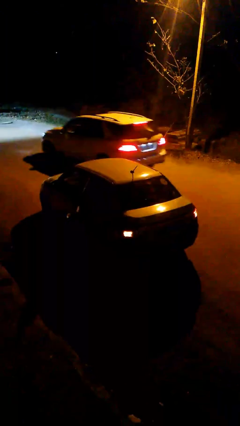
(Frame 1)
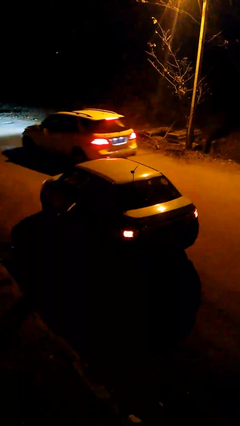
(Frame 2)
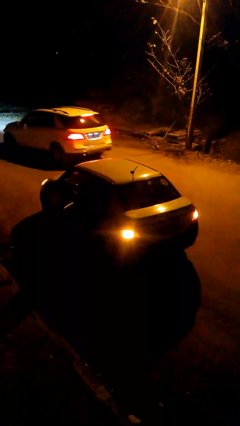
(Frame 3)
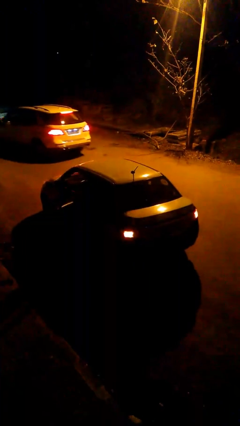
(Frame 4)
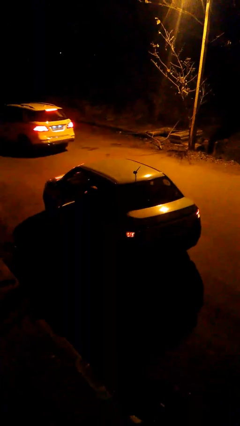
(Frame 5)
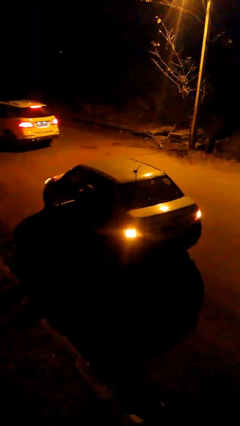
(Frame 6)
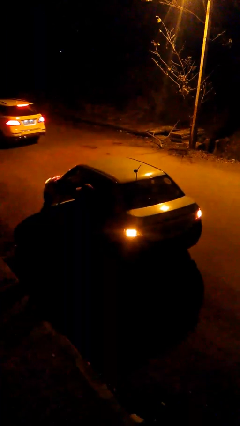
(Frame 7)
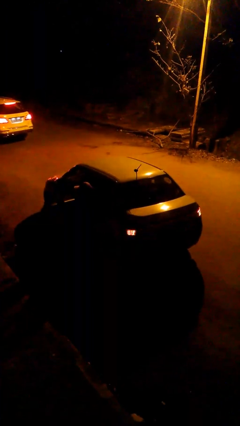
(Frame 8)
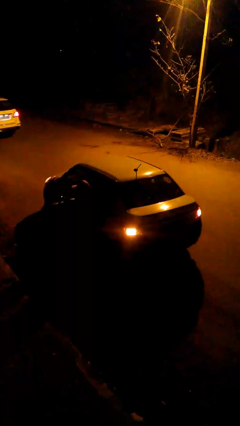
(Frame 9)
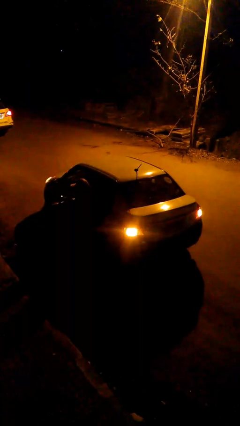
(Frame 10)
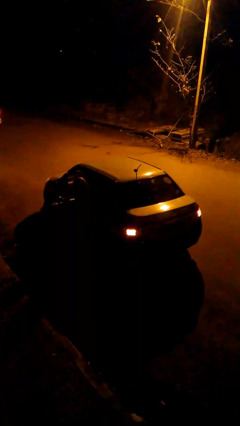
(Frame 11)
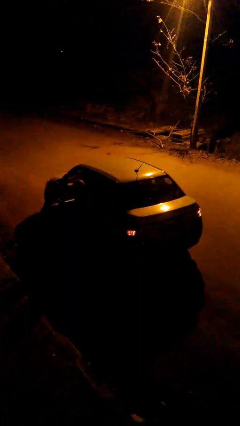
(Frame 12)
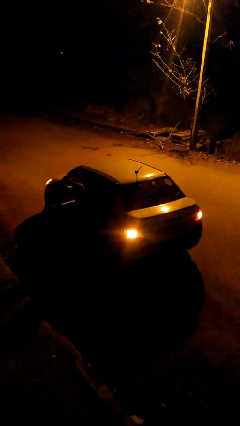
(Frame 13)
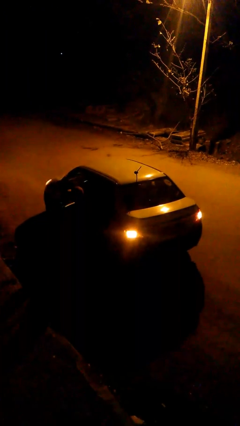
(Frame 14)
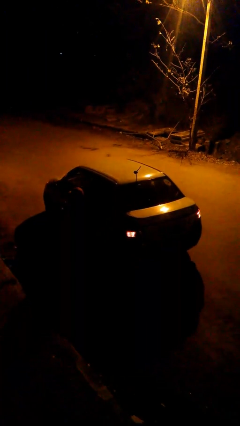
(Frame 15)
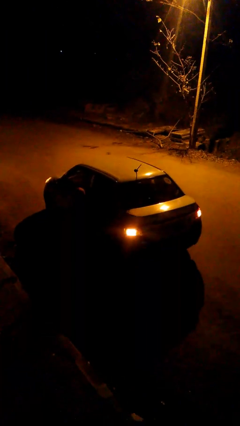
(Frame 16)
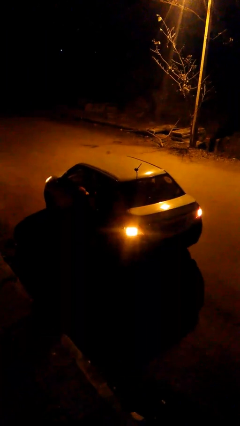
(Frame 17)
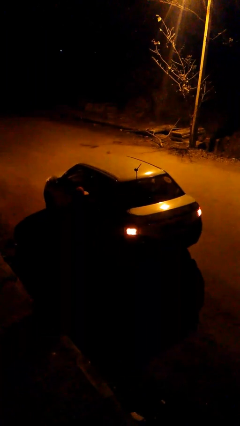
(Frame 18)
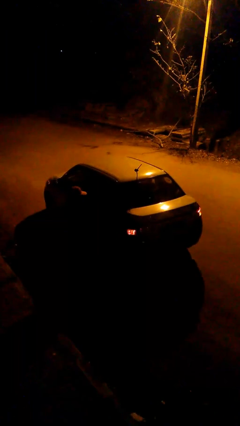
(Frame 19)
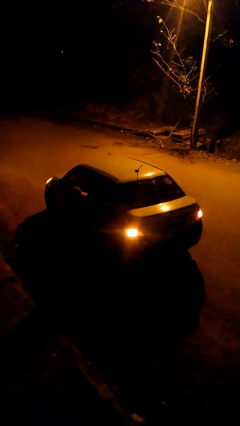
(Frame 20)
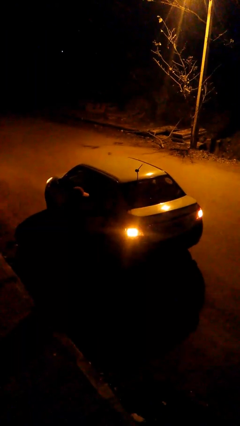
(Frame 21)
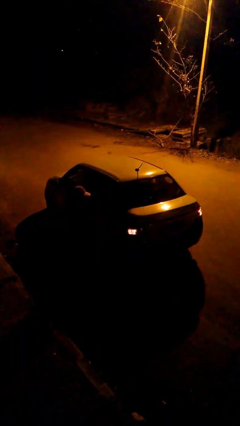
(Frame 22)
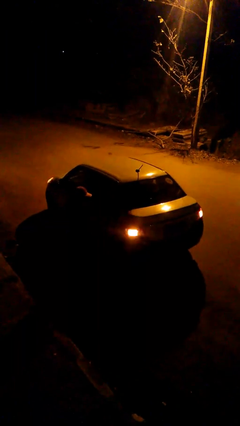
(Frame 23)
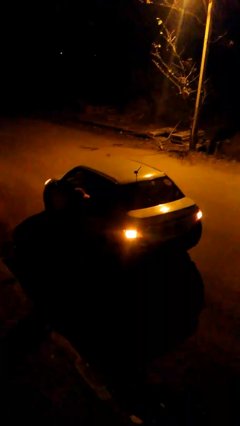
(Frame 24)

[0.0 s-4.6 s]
car drops off person

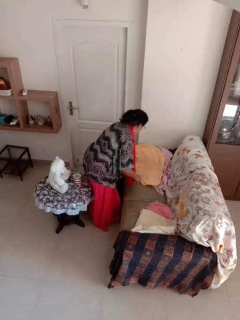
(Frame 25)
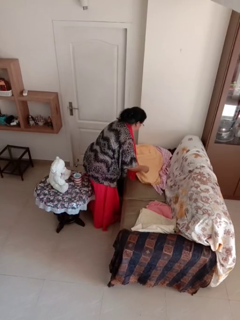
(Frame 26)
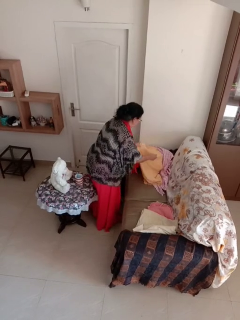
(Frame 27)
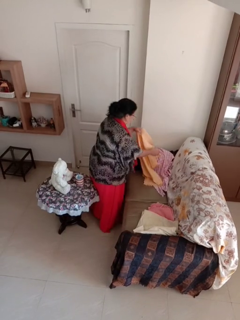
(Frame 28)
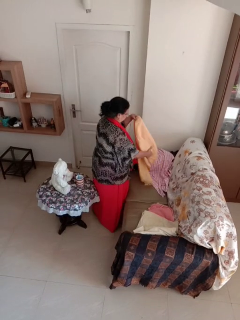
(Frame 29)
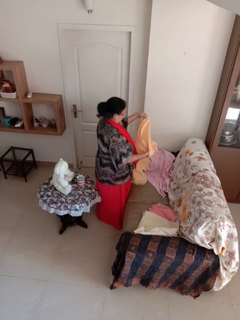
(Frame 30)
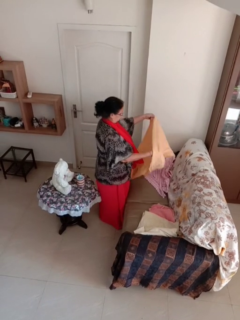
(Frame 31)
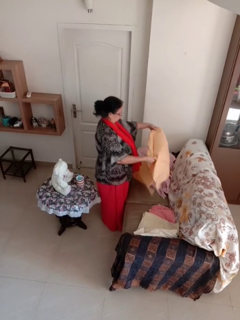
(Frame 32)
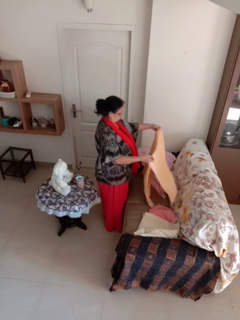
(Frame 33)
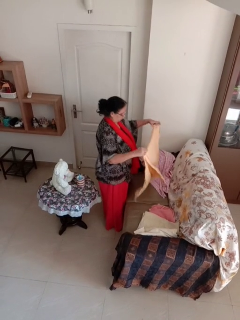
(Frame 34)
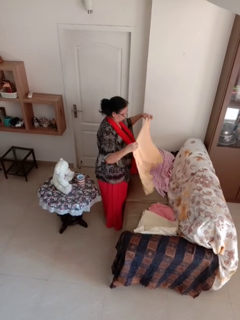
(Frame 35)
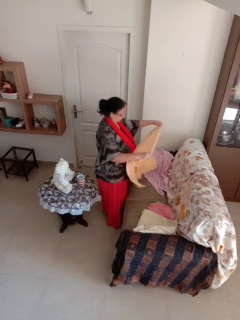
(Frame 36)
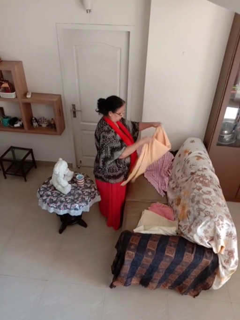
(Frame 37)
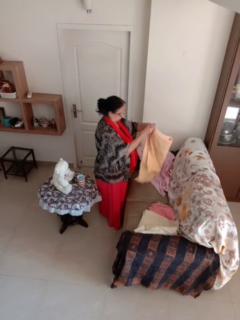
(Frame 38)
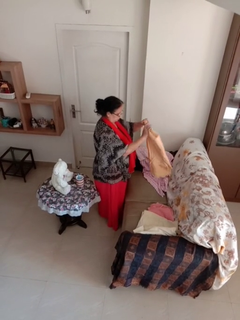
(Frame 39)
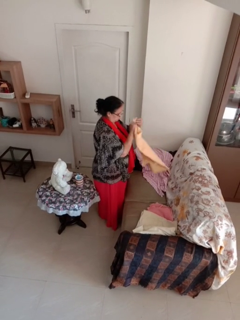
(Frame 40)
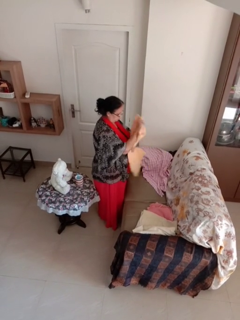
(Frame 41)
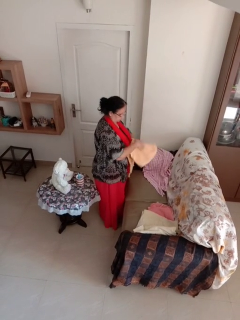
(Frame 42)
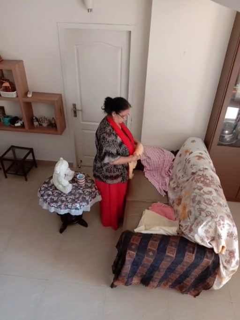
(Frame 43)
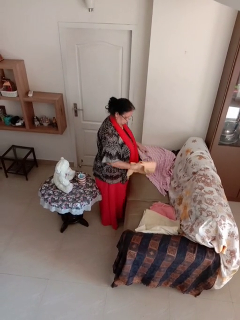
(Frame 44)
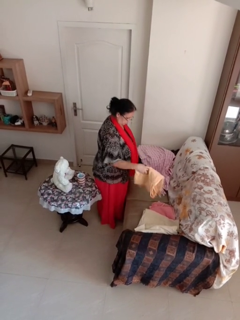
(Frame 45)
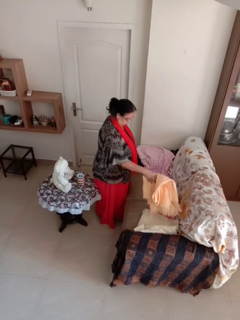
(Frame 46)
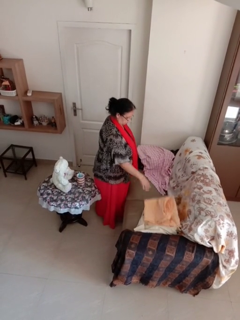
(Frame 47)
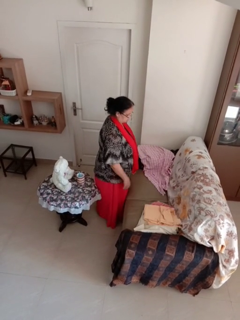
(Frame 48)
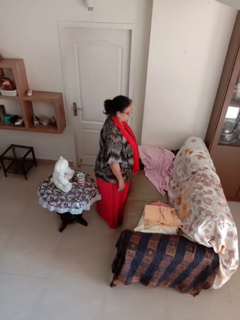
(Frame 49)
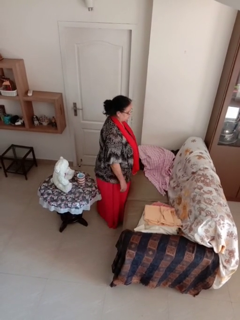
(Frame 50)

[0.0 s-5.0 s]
person folds towel

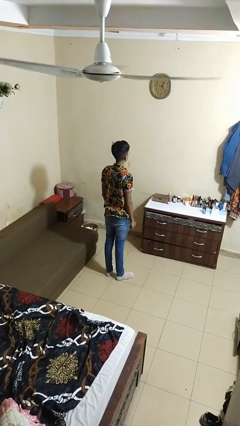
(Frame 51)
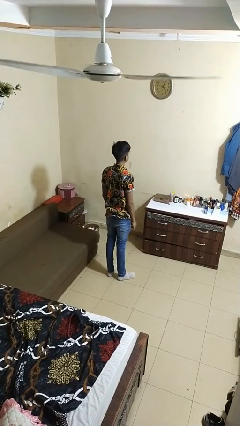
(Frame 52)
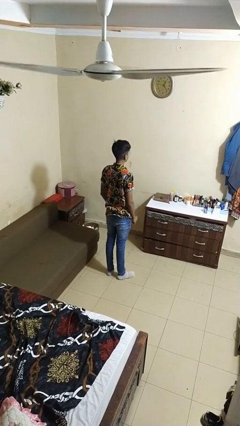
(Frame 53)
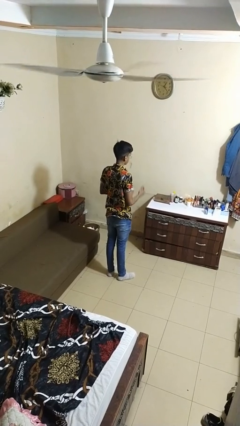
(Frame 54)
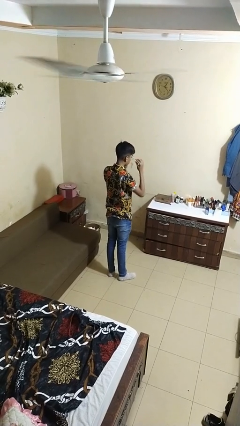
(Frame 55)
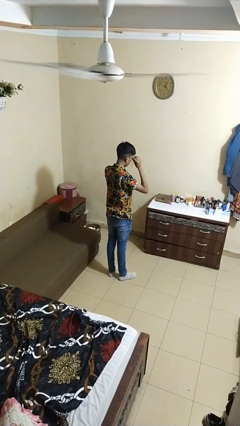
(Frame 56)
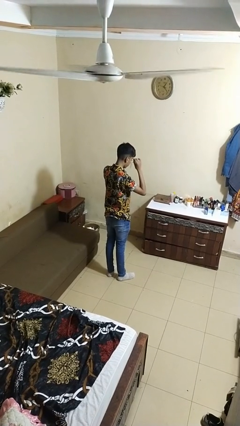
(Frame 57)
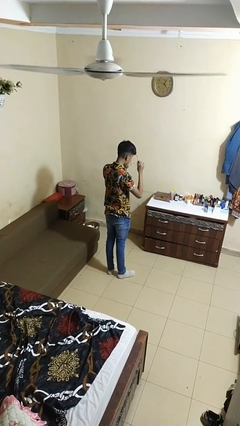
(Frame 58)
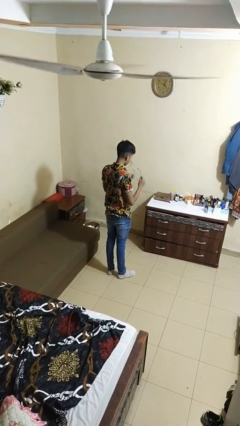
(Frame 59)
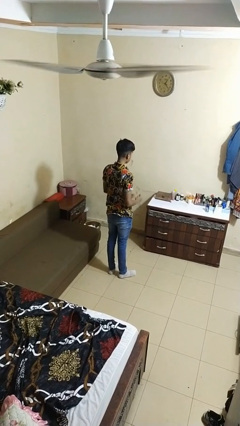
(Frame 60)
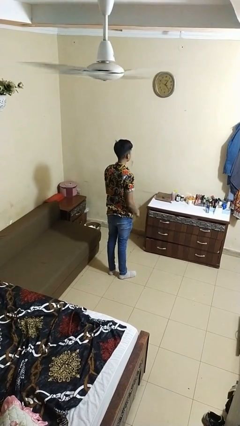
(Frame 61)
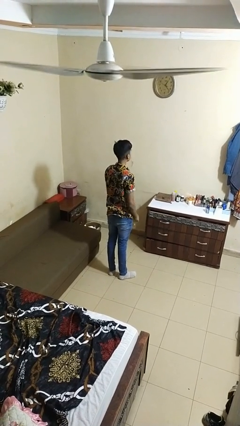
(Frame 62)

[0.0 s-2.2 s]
person takes off glasses

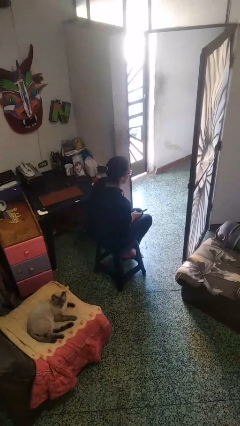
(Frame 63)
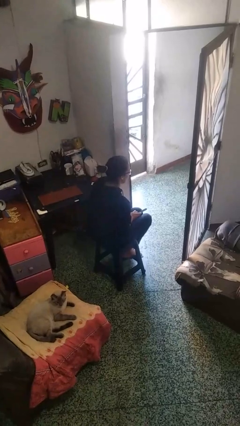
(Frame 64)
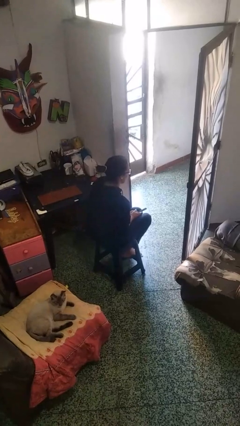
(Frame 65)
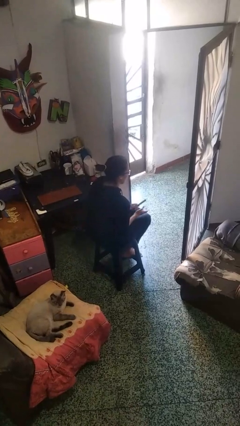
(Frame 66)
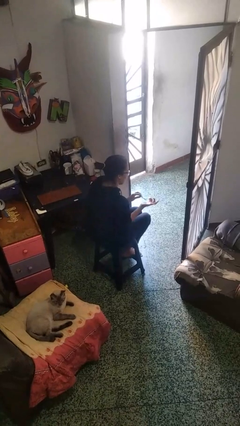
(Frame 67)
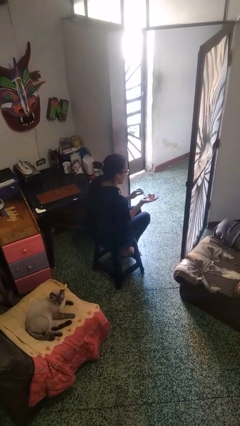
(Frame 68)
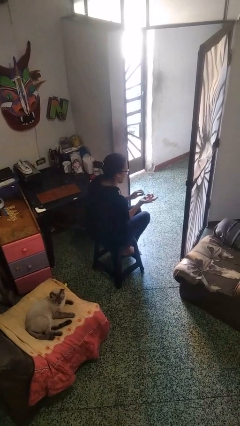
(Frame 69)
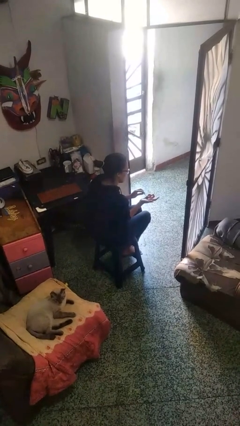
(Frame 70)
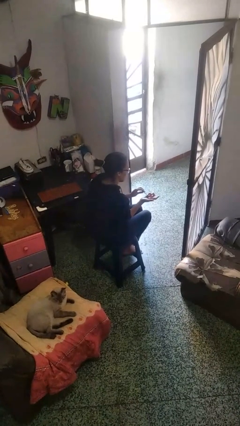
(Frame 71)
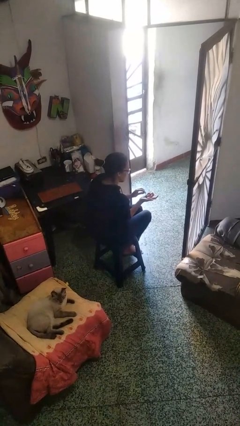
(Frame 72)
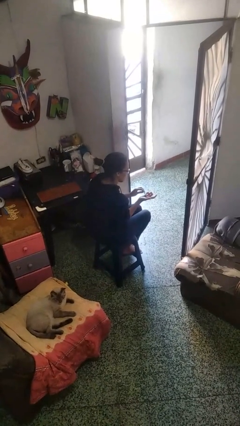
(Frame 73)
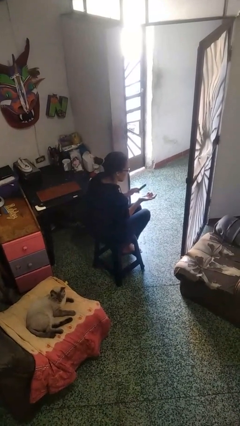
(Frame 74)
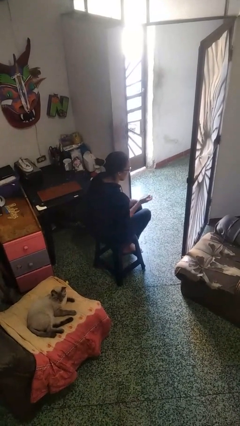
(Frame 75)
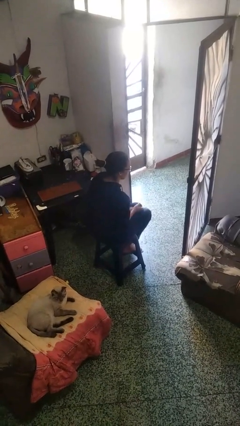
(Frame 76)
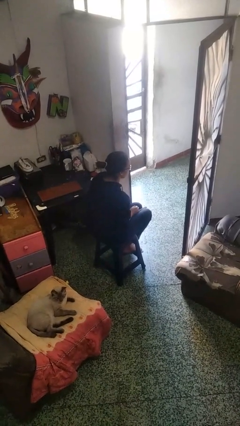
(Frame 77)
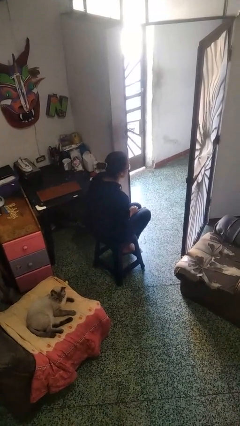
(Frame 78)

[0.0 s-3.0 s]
person files fingernails

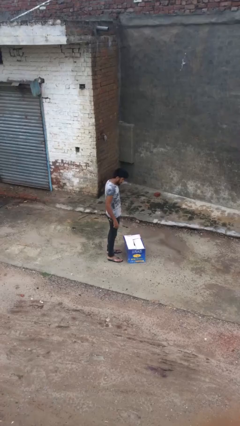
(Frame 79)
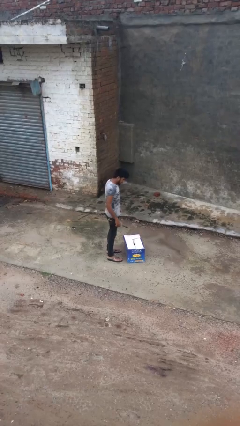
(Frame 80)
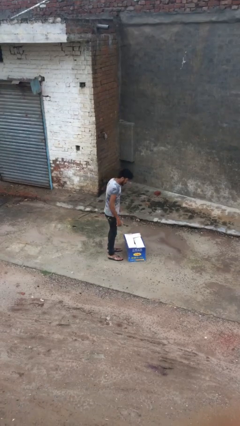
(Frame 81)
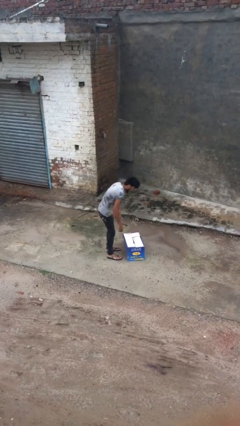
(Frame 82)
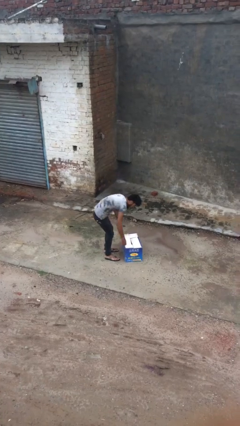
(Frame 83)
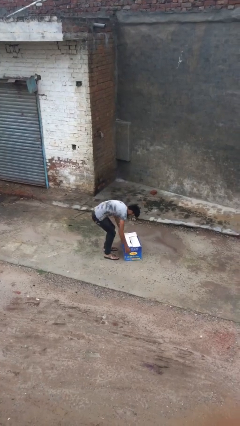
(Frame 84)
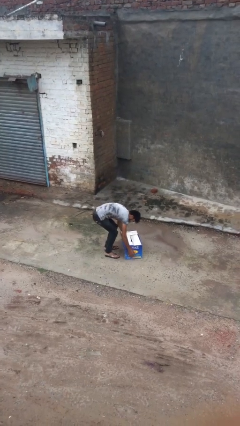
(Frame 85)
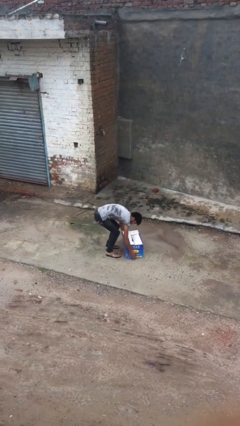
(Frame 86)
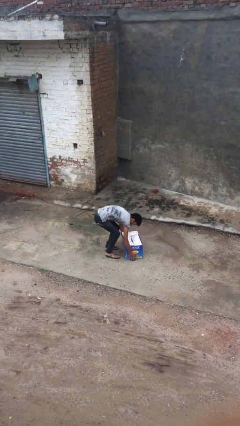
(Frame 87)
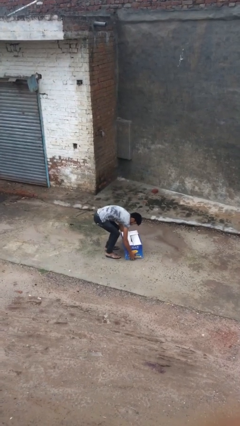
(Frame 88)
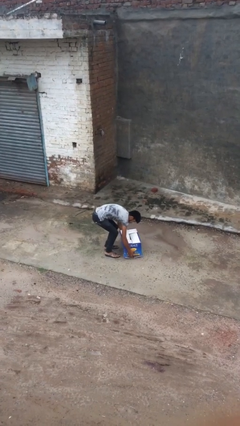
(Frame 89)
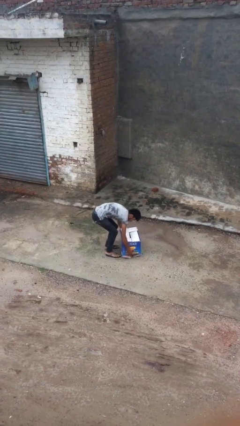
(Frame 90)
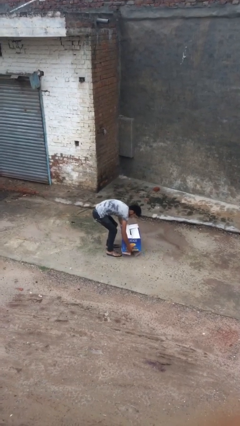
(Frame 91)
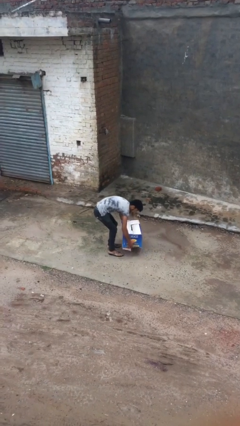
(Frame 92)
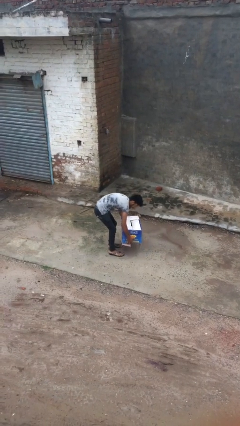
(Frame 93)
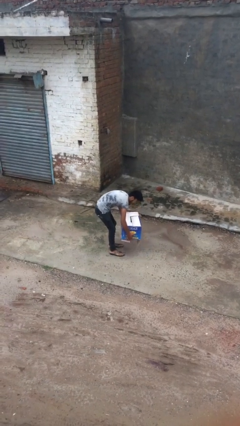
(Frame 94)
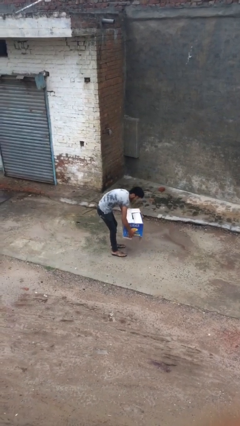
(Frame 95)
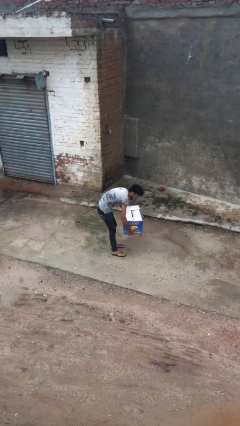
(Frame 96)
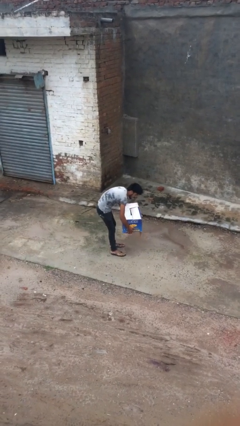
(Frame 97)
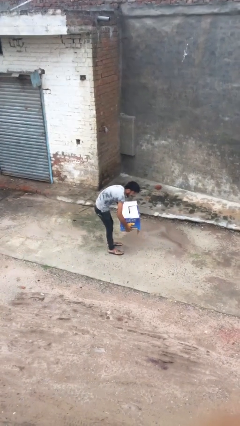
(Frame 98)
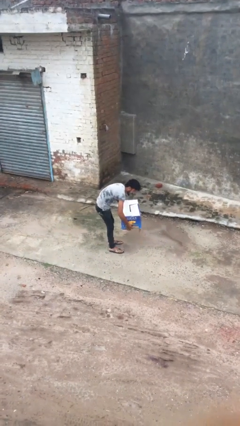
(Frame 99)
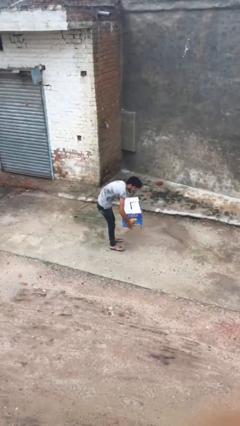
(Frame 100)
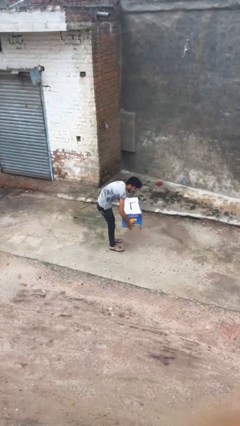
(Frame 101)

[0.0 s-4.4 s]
person picks up object from floor
